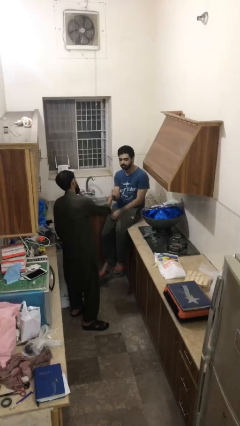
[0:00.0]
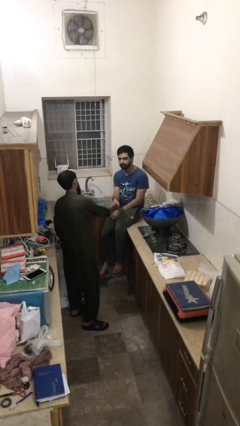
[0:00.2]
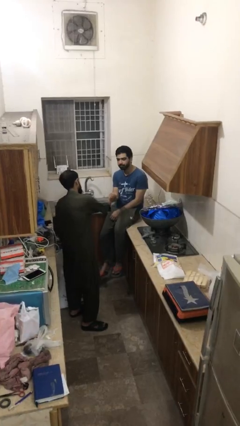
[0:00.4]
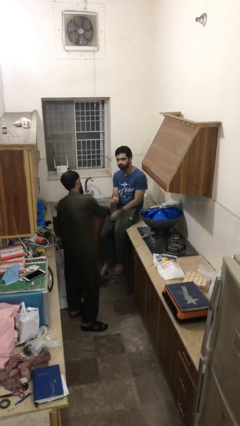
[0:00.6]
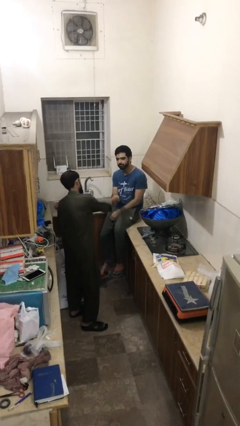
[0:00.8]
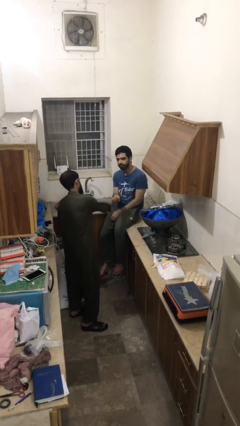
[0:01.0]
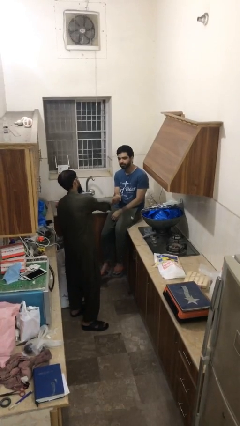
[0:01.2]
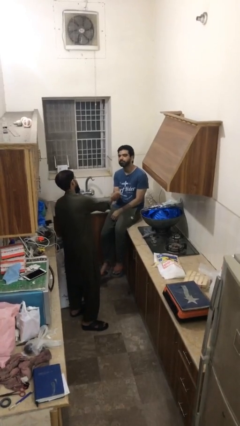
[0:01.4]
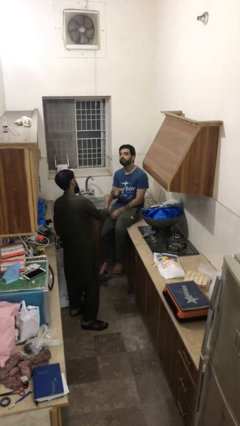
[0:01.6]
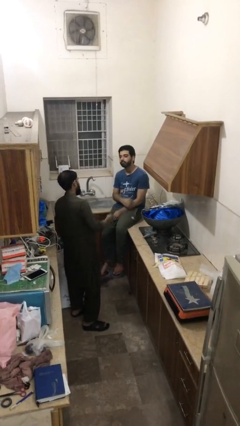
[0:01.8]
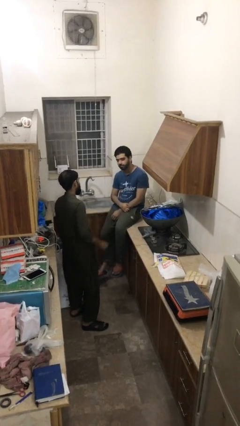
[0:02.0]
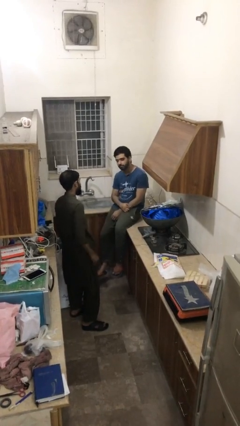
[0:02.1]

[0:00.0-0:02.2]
person shakes hand

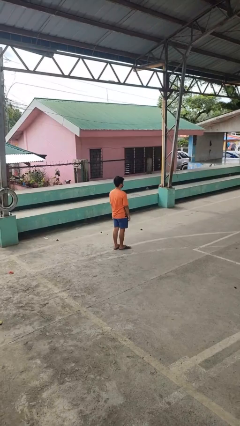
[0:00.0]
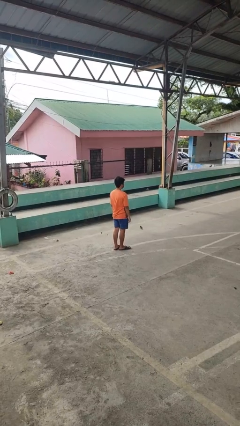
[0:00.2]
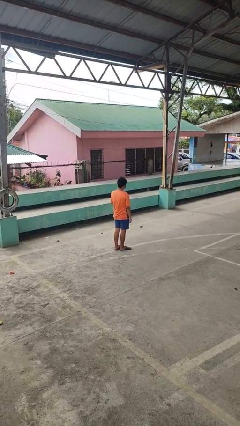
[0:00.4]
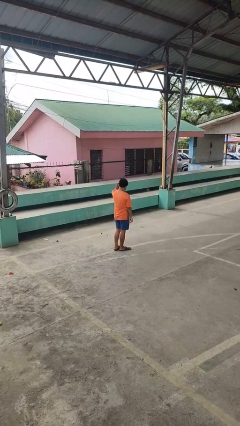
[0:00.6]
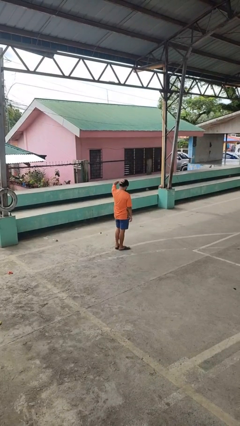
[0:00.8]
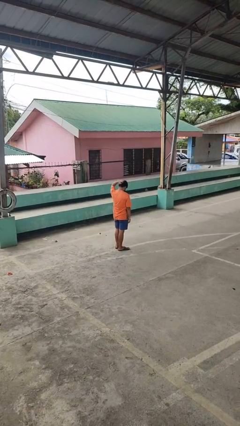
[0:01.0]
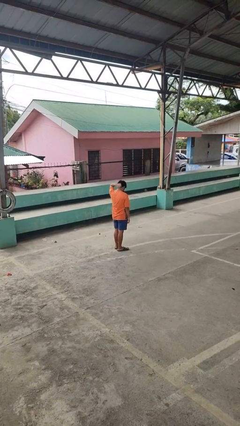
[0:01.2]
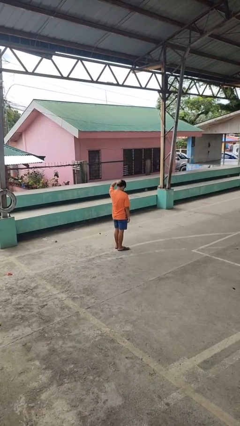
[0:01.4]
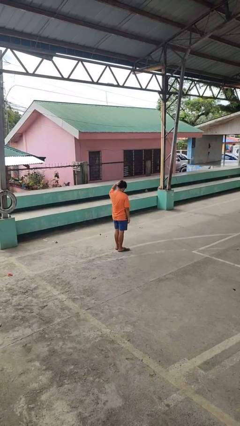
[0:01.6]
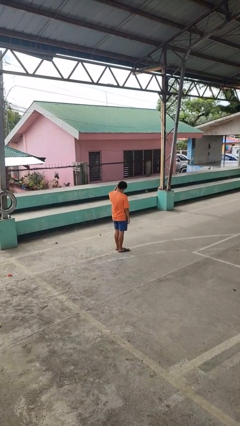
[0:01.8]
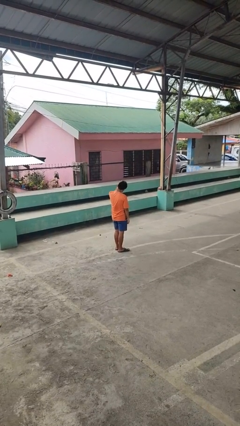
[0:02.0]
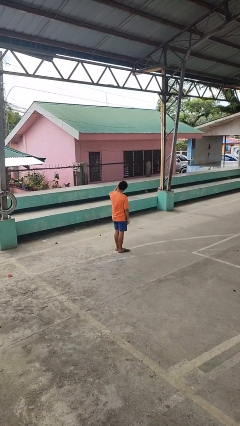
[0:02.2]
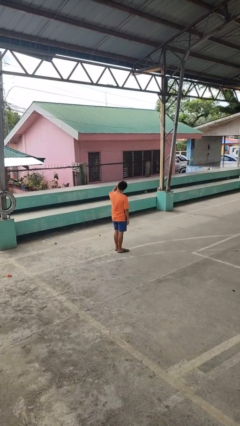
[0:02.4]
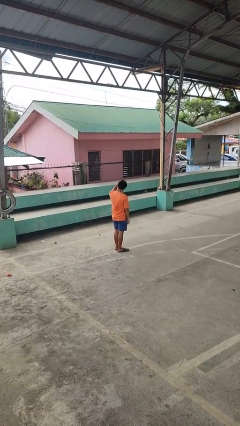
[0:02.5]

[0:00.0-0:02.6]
person scratches face

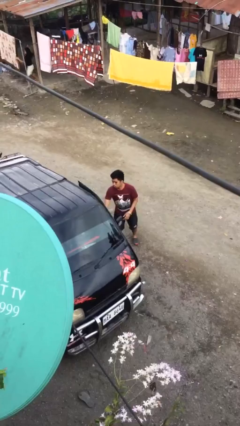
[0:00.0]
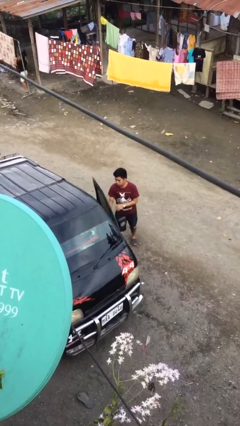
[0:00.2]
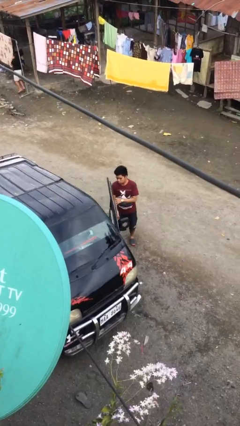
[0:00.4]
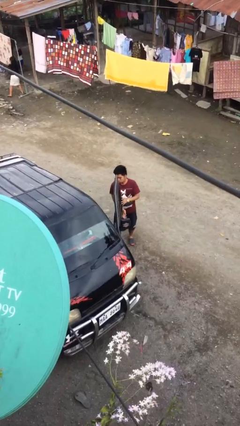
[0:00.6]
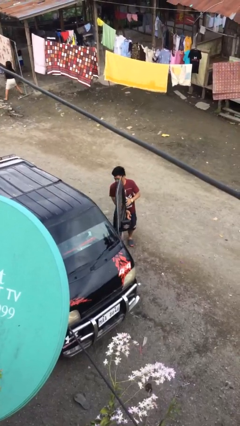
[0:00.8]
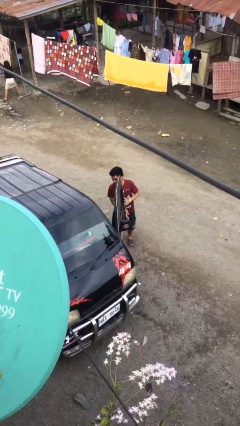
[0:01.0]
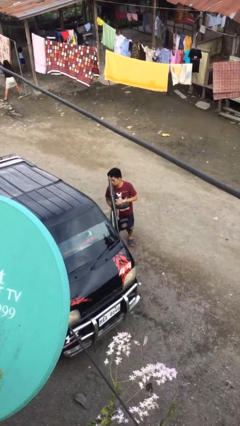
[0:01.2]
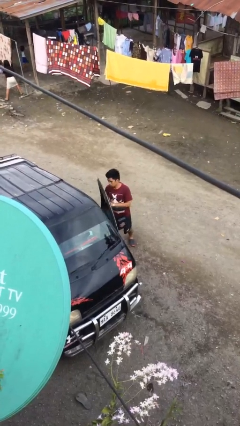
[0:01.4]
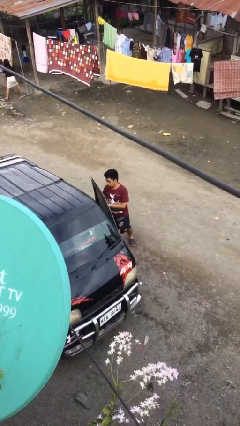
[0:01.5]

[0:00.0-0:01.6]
person opens car door

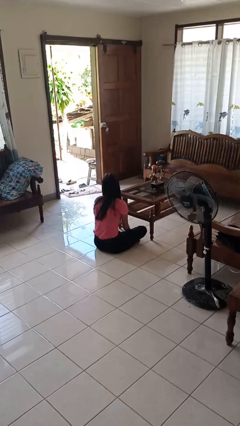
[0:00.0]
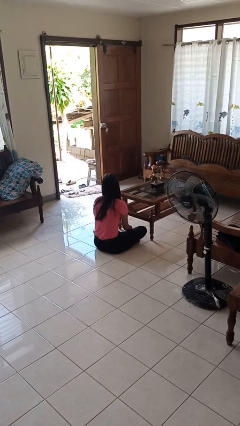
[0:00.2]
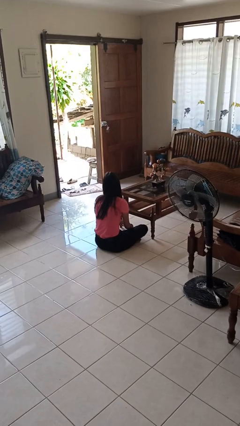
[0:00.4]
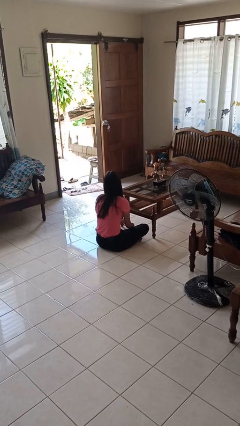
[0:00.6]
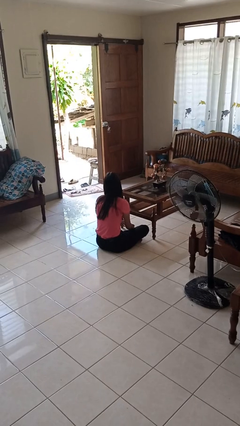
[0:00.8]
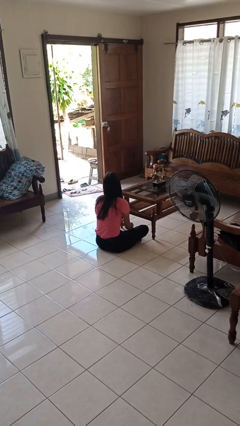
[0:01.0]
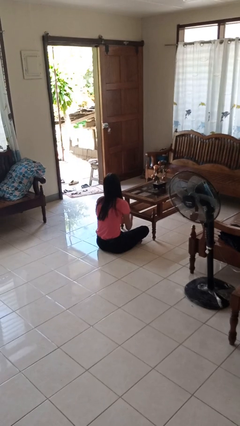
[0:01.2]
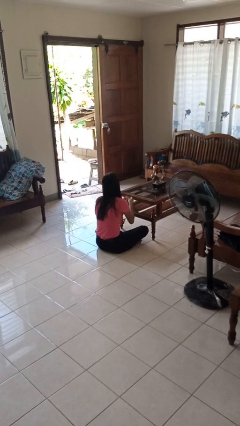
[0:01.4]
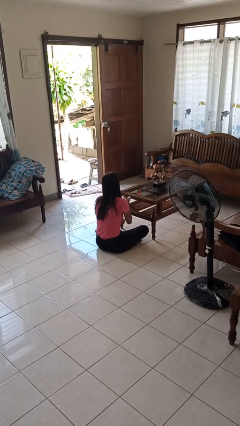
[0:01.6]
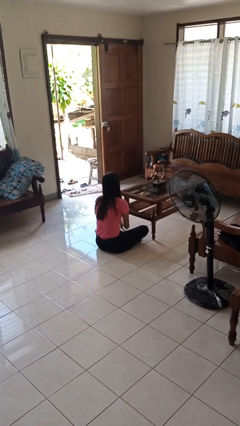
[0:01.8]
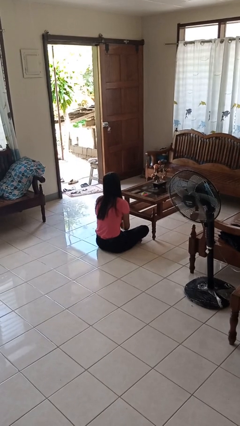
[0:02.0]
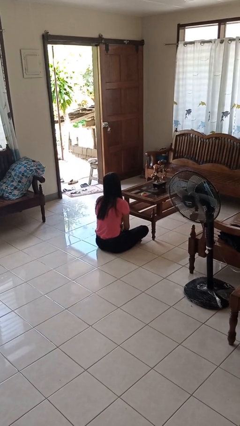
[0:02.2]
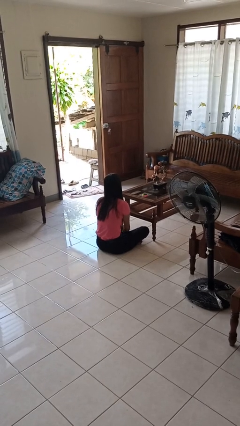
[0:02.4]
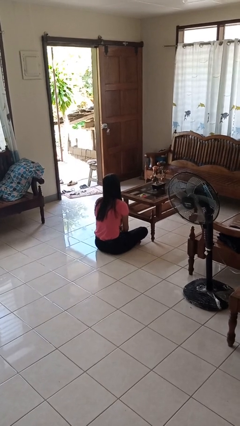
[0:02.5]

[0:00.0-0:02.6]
person throws object on table

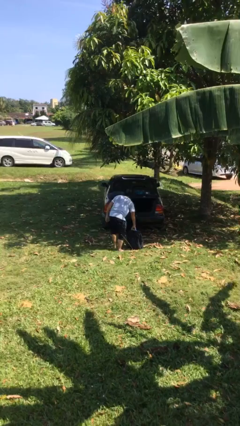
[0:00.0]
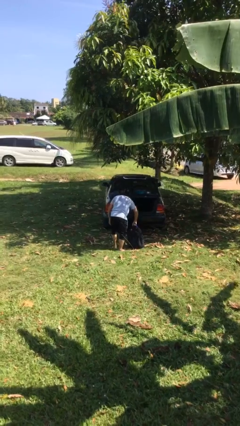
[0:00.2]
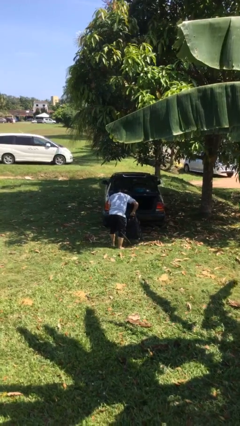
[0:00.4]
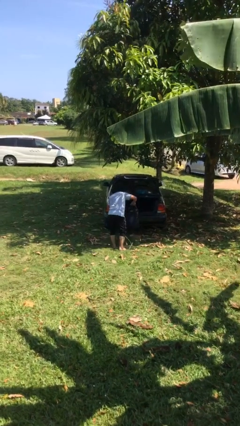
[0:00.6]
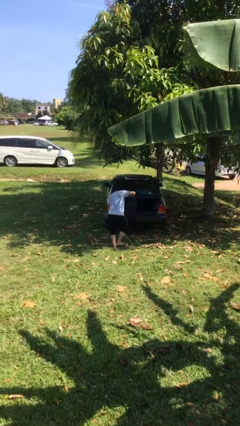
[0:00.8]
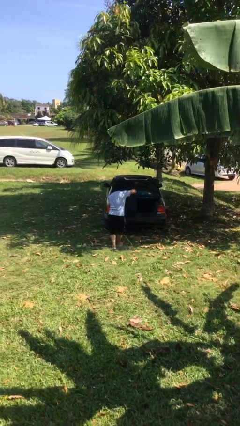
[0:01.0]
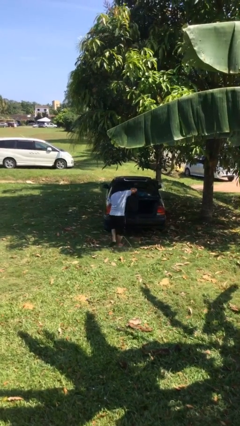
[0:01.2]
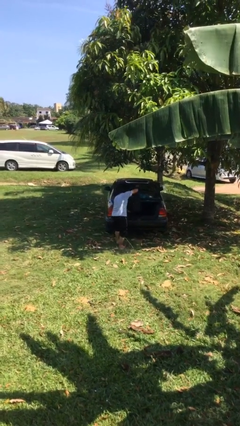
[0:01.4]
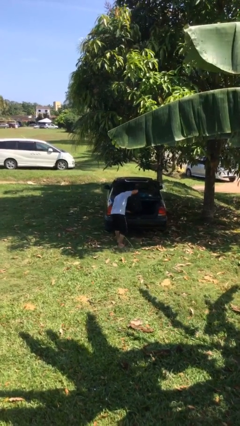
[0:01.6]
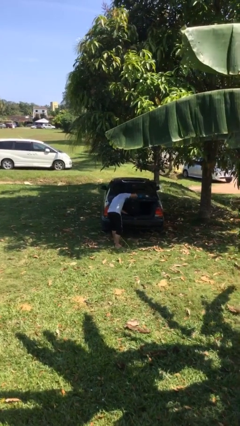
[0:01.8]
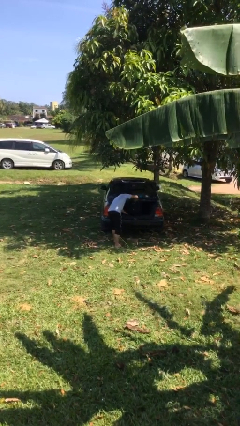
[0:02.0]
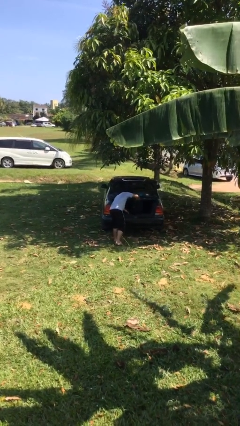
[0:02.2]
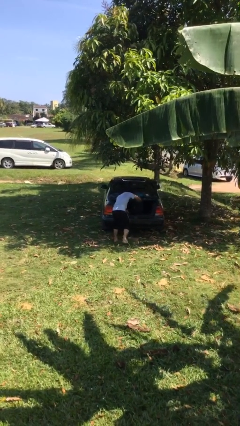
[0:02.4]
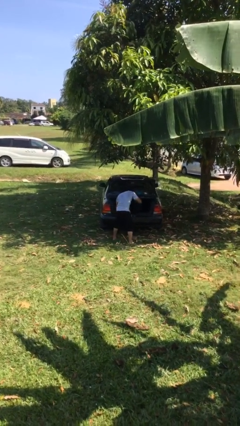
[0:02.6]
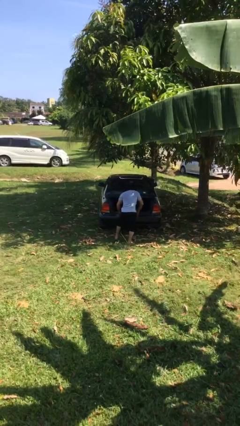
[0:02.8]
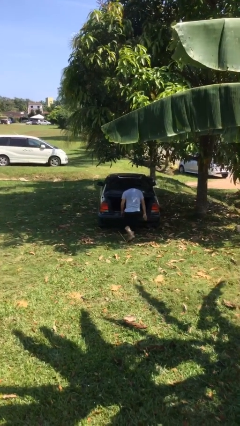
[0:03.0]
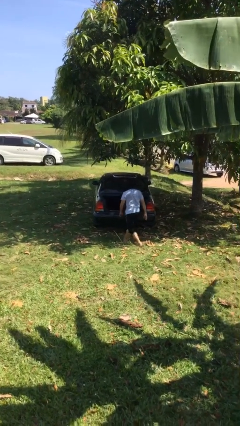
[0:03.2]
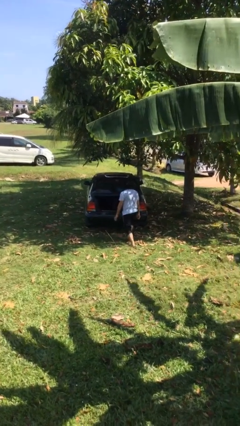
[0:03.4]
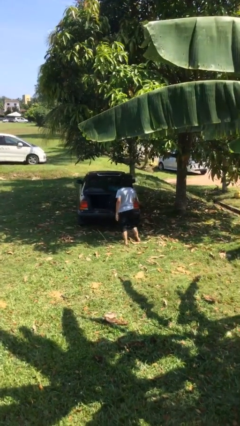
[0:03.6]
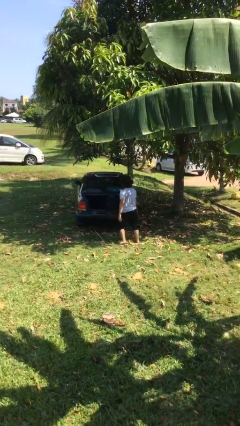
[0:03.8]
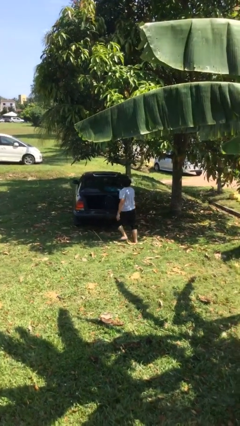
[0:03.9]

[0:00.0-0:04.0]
person loads car

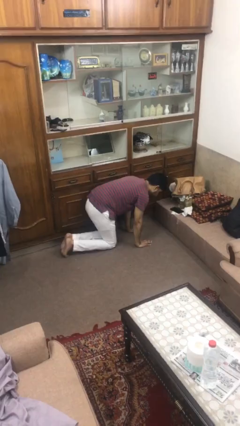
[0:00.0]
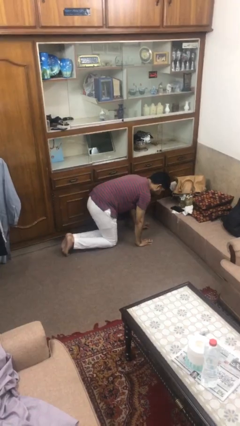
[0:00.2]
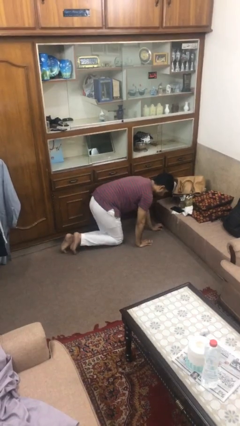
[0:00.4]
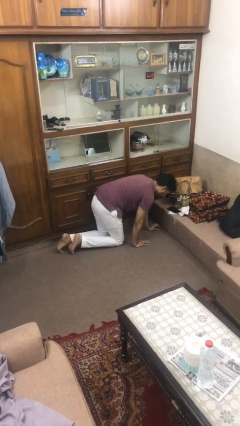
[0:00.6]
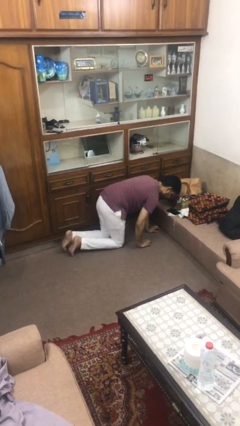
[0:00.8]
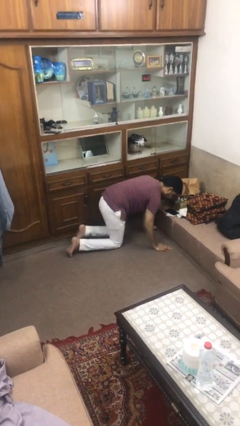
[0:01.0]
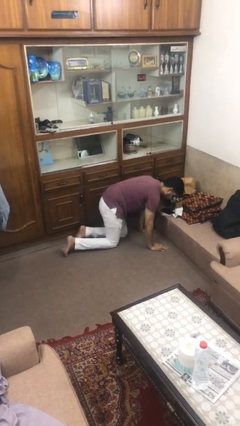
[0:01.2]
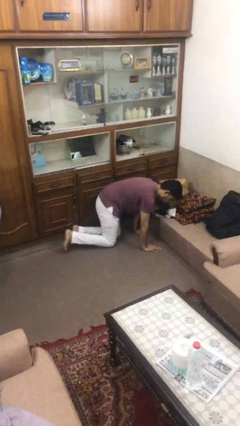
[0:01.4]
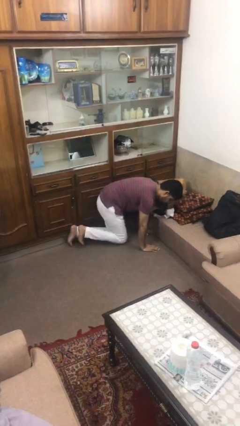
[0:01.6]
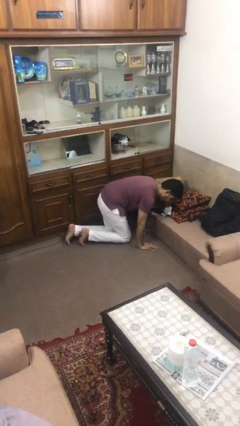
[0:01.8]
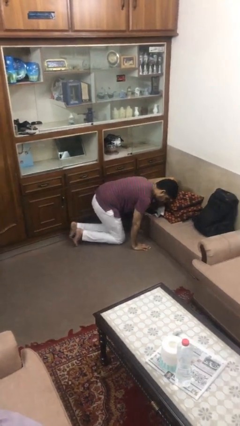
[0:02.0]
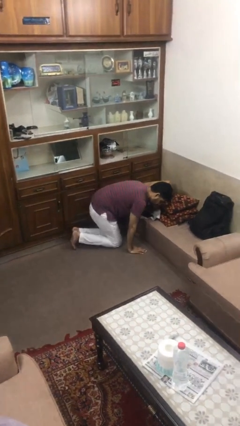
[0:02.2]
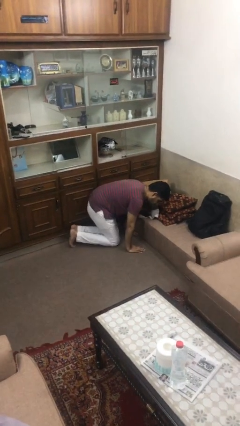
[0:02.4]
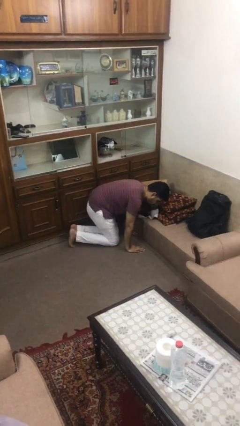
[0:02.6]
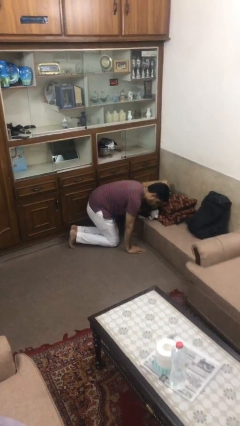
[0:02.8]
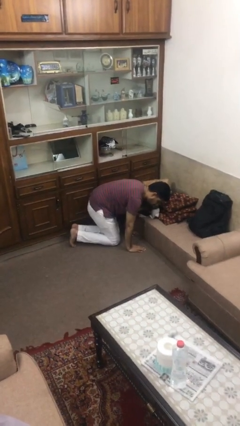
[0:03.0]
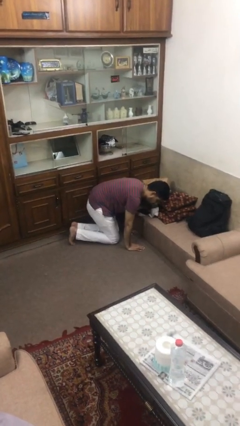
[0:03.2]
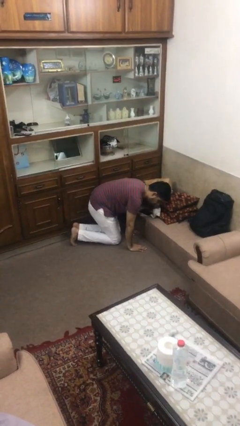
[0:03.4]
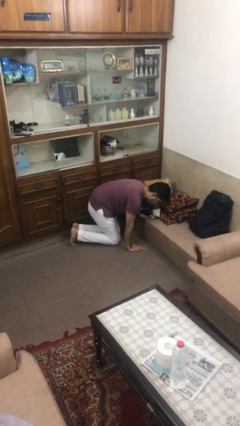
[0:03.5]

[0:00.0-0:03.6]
person crawls

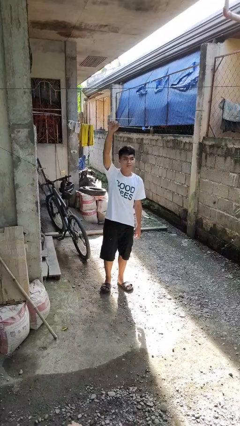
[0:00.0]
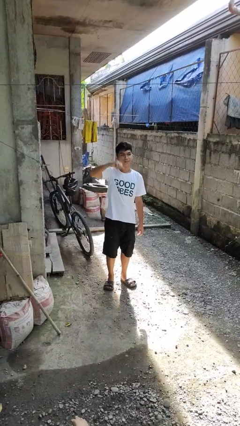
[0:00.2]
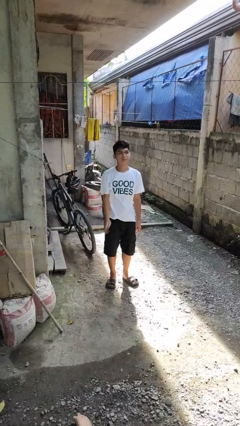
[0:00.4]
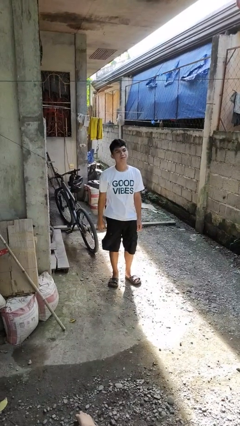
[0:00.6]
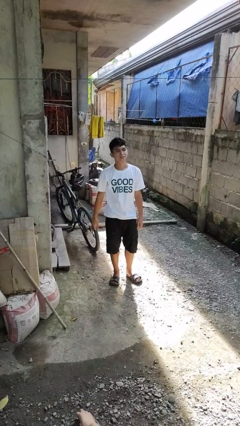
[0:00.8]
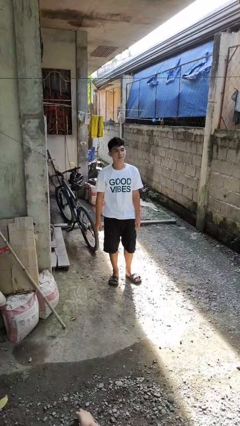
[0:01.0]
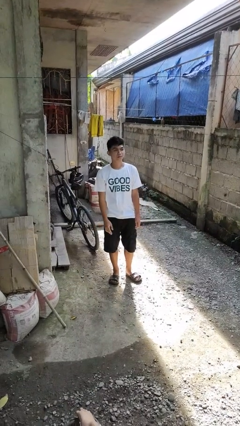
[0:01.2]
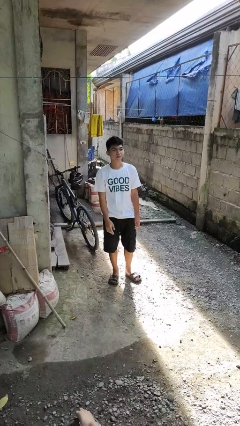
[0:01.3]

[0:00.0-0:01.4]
person gestures lower hand
